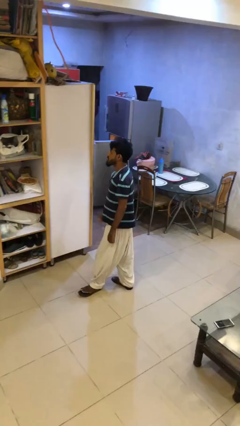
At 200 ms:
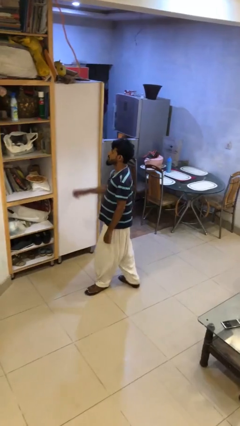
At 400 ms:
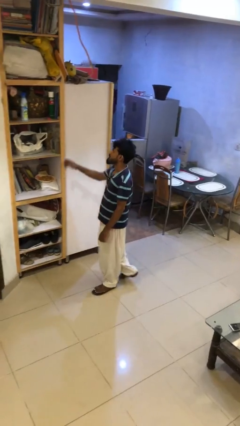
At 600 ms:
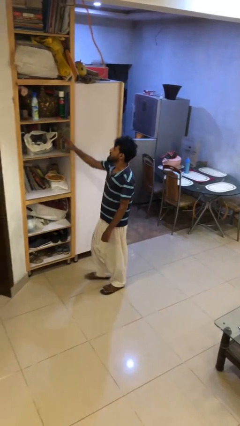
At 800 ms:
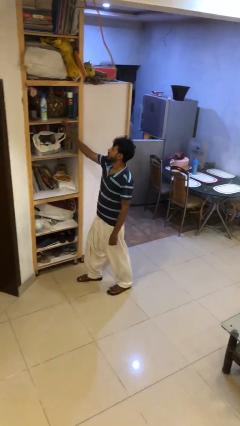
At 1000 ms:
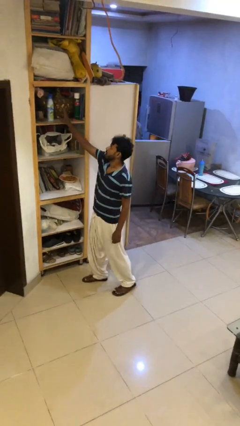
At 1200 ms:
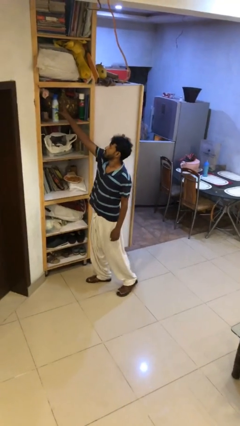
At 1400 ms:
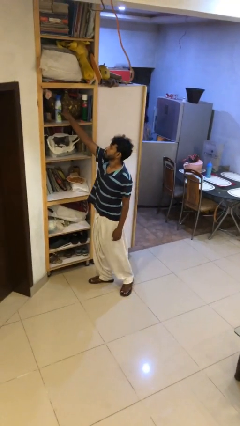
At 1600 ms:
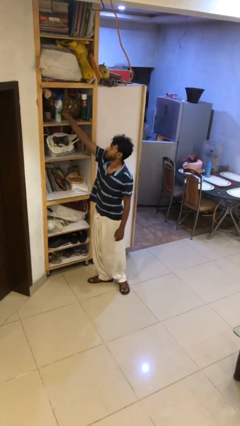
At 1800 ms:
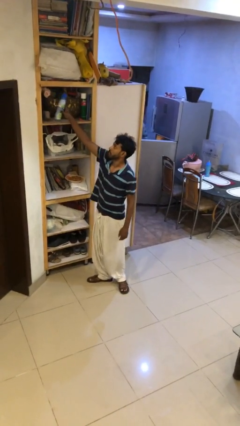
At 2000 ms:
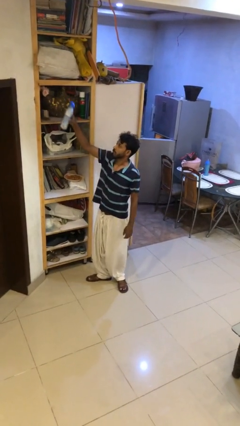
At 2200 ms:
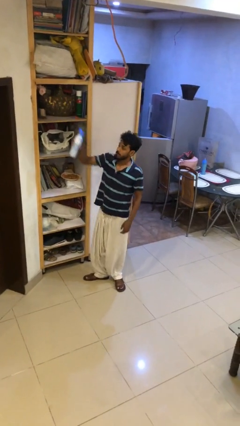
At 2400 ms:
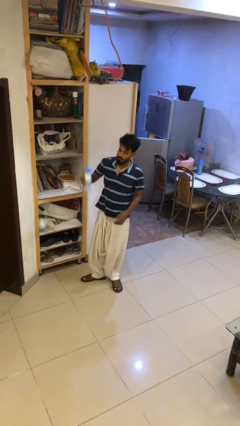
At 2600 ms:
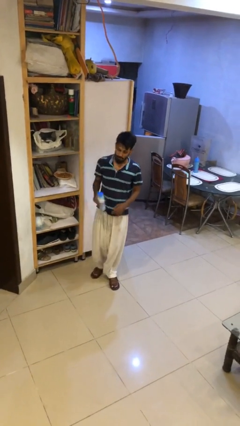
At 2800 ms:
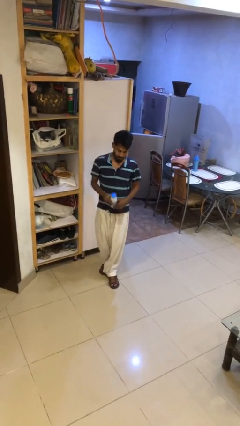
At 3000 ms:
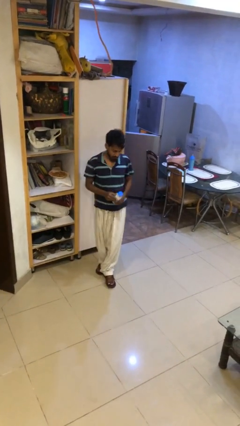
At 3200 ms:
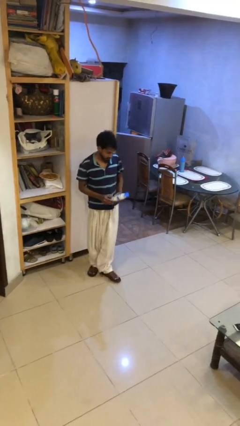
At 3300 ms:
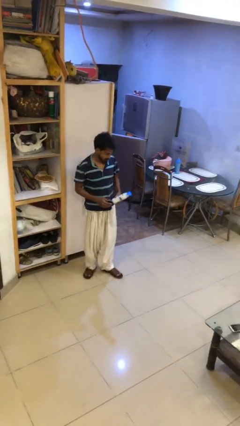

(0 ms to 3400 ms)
person picks up object from shelf

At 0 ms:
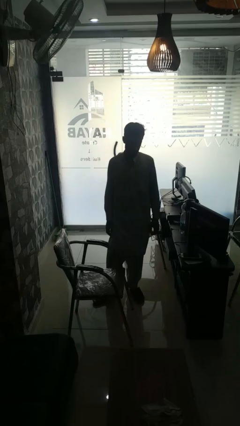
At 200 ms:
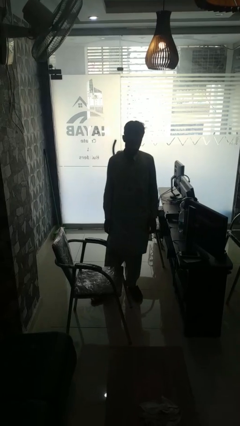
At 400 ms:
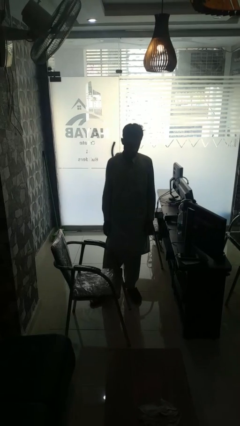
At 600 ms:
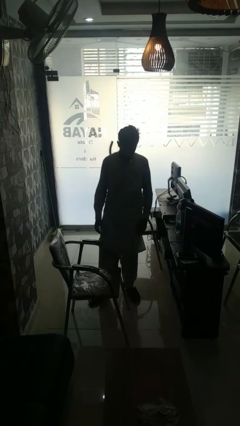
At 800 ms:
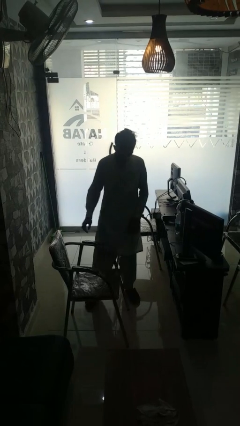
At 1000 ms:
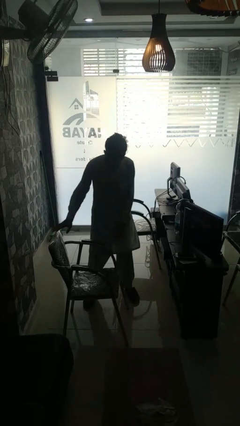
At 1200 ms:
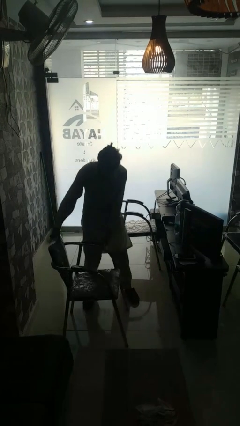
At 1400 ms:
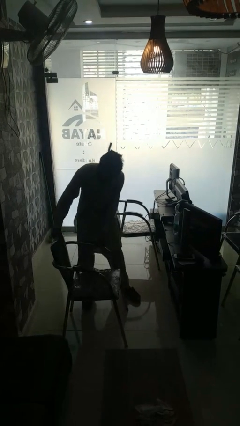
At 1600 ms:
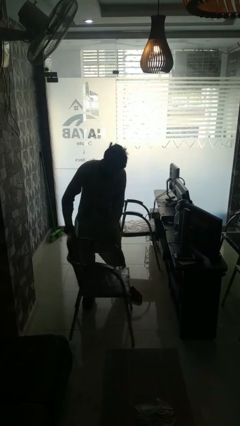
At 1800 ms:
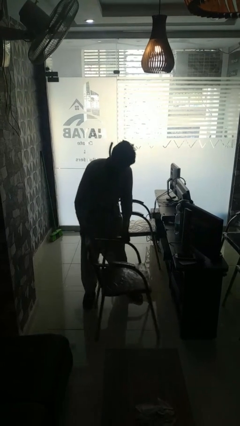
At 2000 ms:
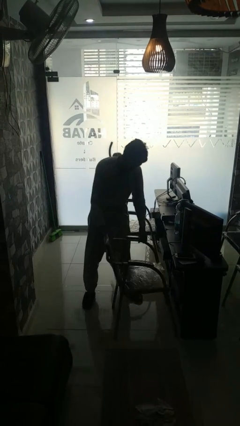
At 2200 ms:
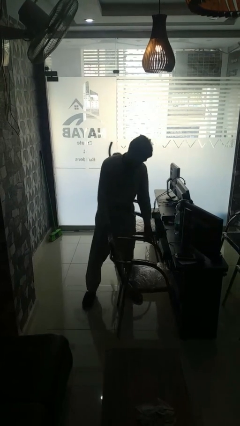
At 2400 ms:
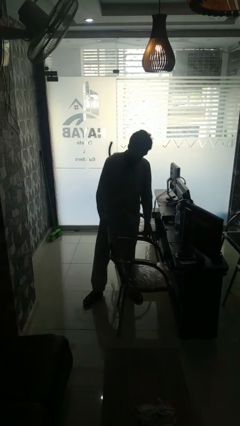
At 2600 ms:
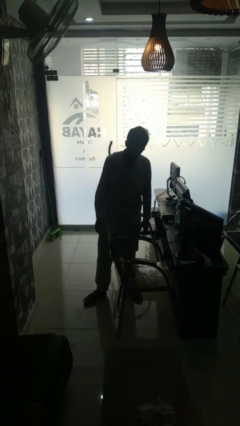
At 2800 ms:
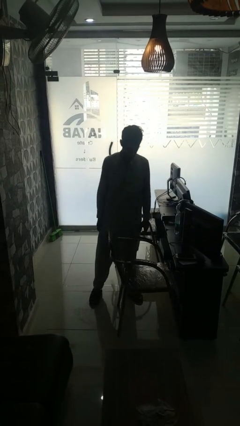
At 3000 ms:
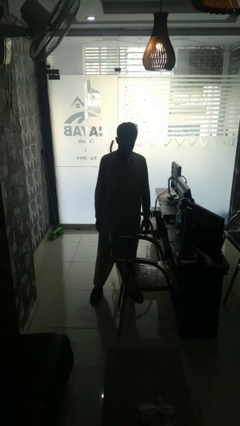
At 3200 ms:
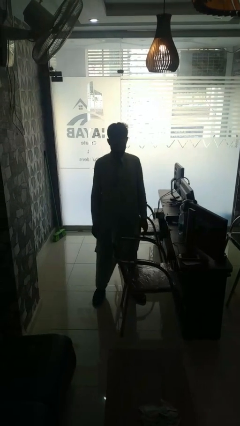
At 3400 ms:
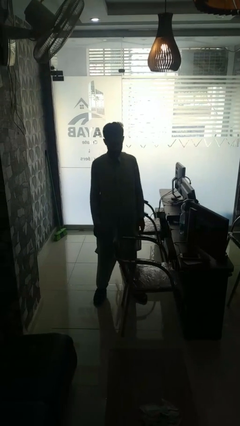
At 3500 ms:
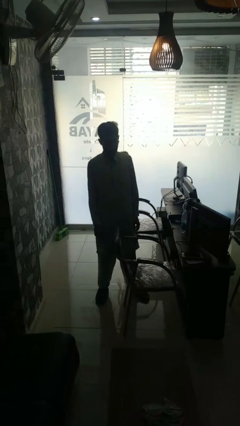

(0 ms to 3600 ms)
person pushes in chair

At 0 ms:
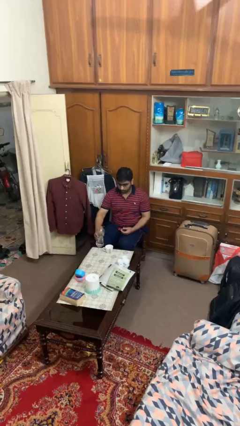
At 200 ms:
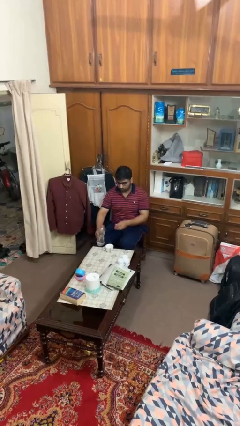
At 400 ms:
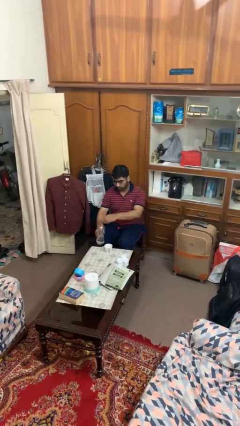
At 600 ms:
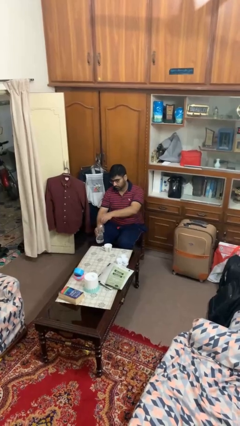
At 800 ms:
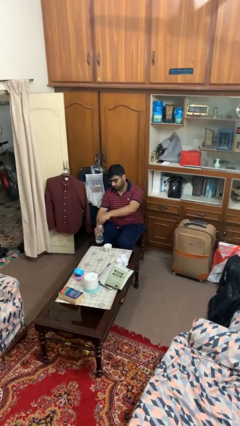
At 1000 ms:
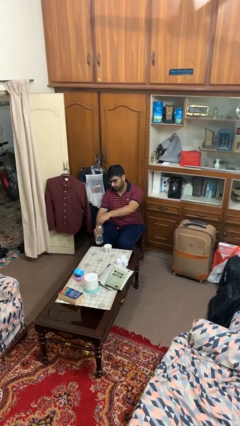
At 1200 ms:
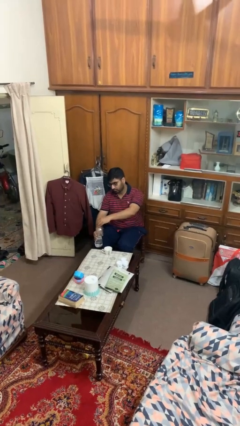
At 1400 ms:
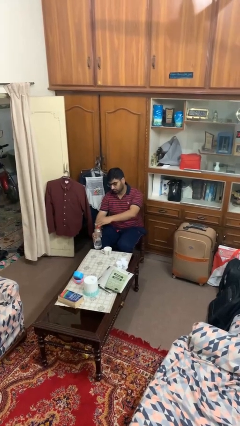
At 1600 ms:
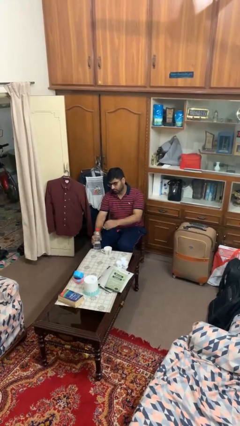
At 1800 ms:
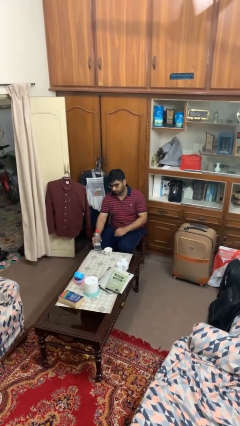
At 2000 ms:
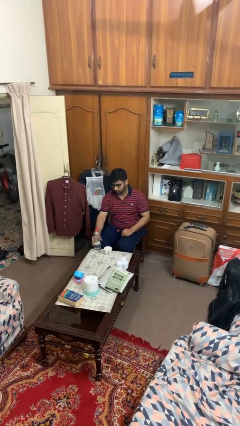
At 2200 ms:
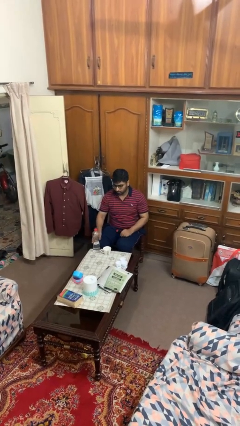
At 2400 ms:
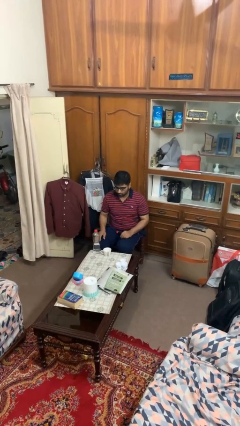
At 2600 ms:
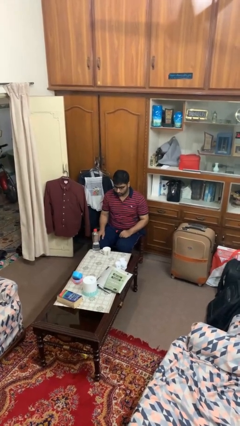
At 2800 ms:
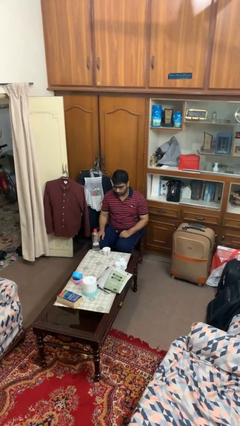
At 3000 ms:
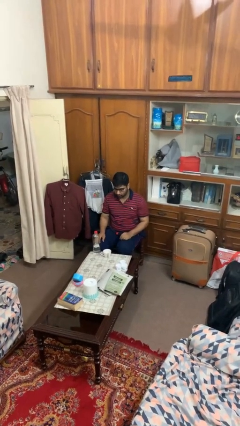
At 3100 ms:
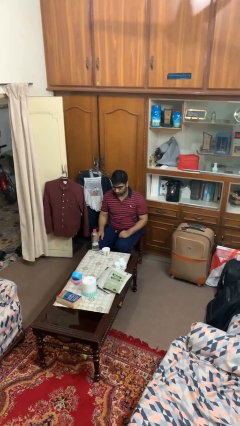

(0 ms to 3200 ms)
person screws lid to bottle

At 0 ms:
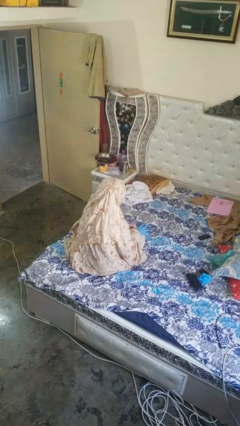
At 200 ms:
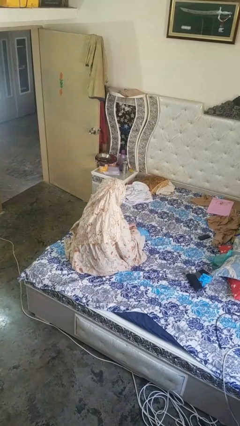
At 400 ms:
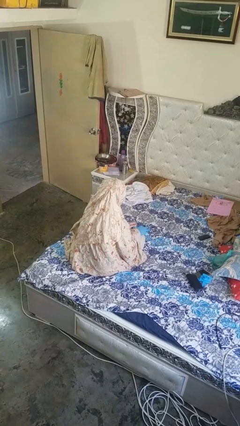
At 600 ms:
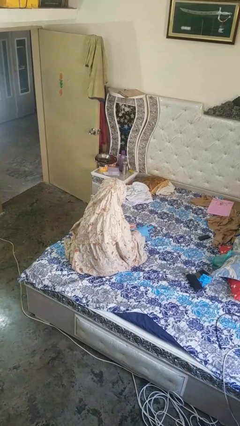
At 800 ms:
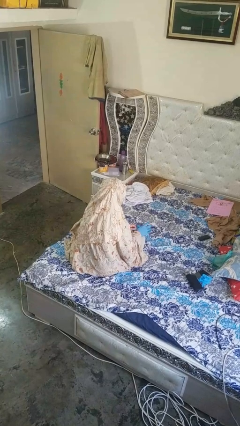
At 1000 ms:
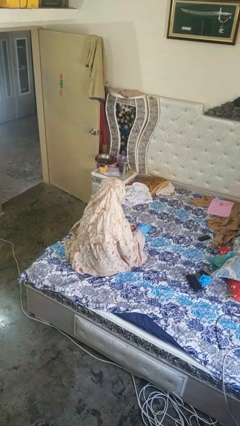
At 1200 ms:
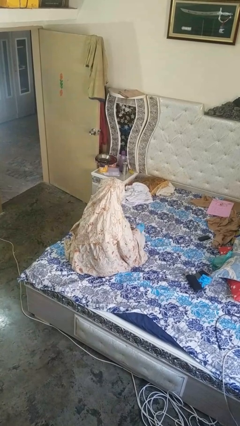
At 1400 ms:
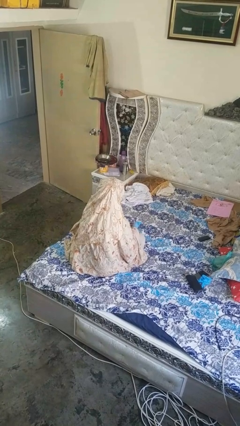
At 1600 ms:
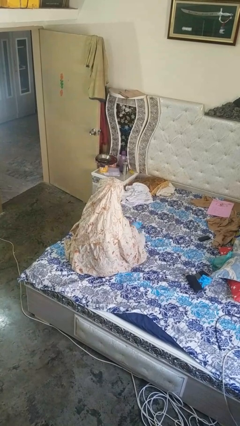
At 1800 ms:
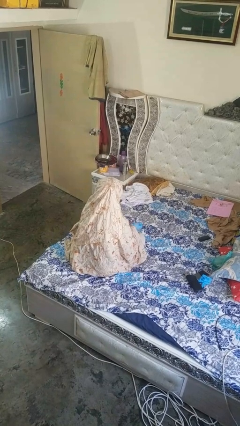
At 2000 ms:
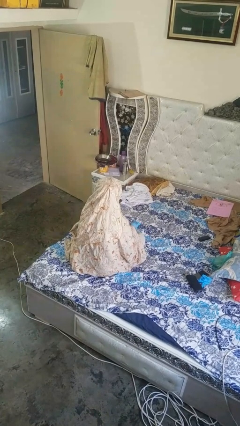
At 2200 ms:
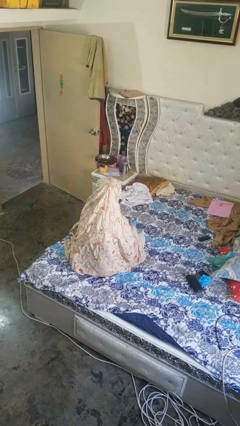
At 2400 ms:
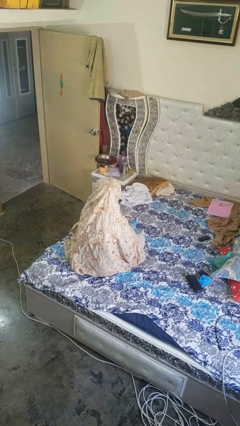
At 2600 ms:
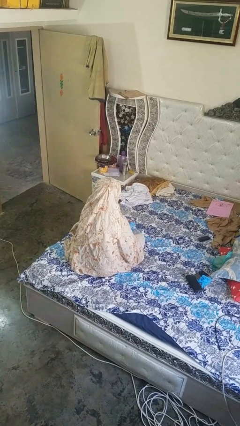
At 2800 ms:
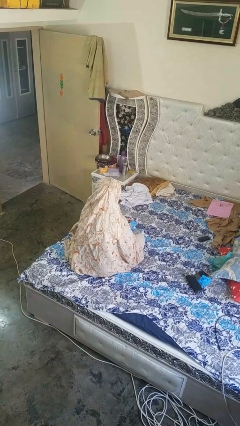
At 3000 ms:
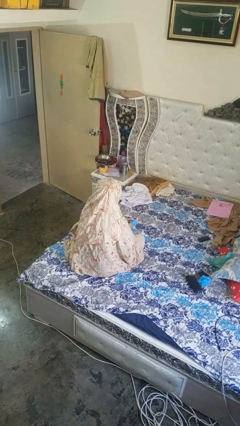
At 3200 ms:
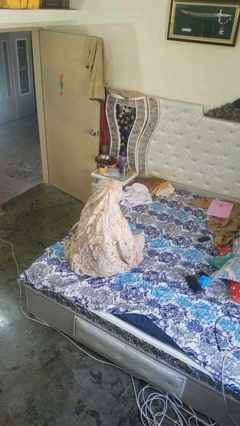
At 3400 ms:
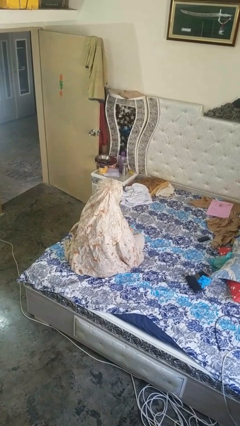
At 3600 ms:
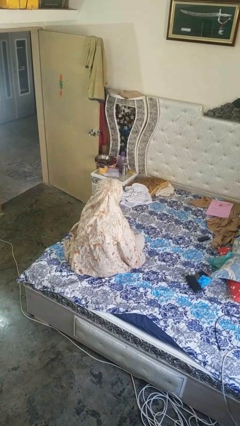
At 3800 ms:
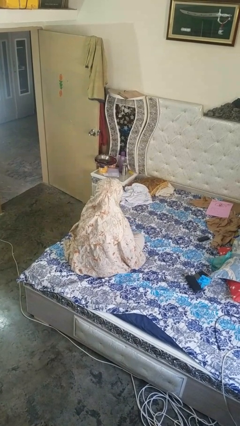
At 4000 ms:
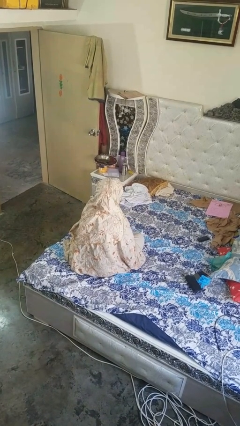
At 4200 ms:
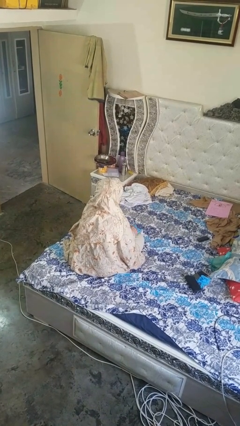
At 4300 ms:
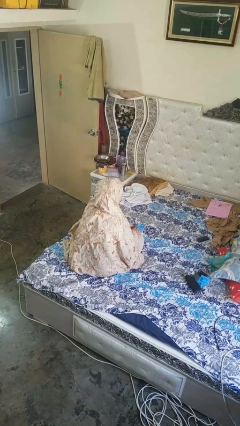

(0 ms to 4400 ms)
person takes off gloves

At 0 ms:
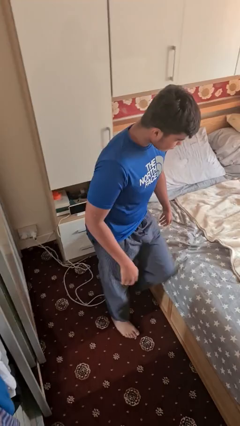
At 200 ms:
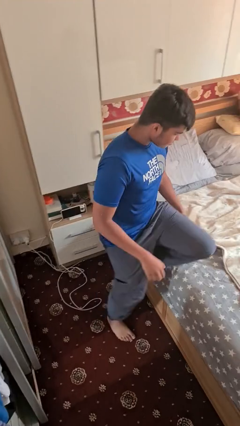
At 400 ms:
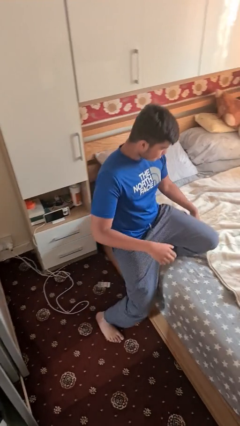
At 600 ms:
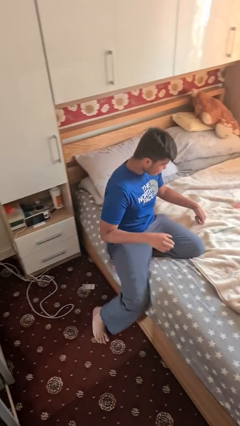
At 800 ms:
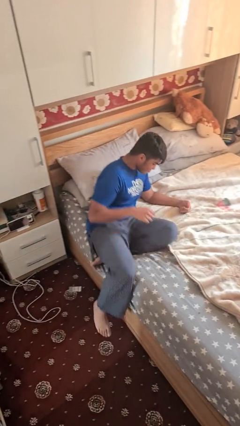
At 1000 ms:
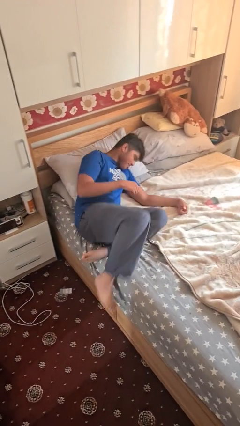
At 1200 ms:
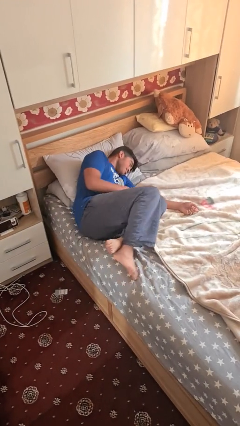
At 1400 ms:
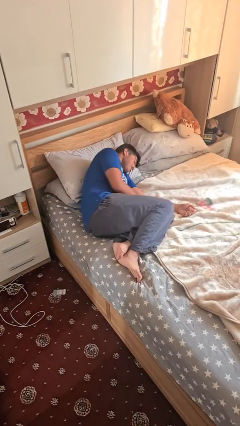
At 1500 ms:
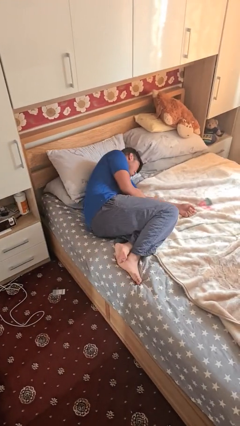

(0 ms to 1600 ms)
person lies down on bed

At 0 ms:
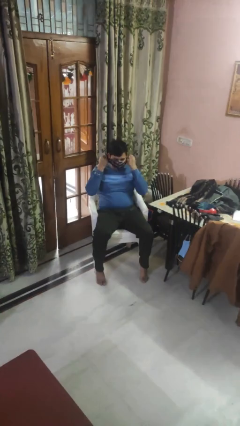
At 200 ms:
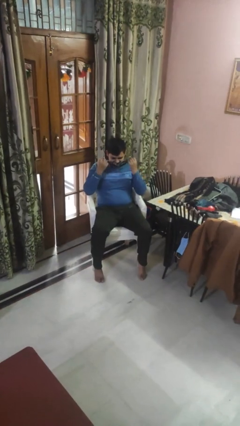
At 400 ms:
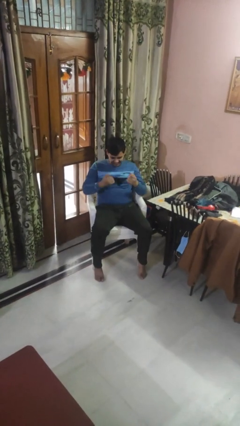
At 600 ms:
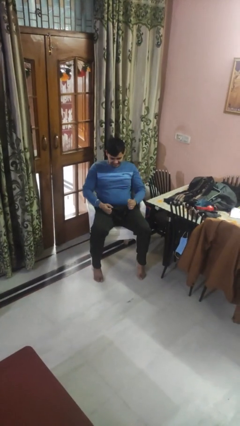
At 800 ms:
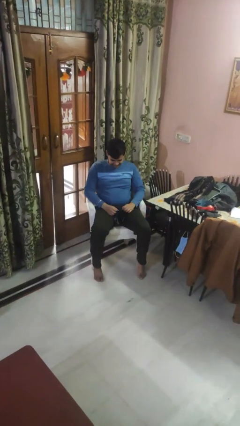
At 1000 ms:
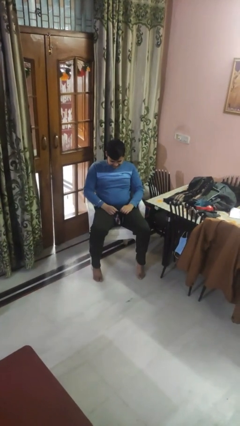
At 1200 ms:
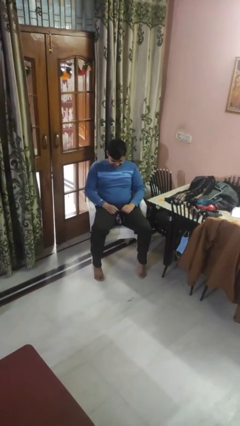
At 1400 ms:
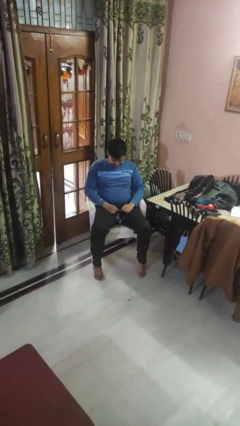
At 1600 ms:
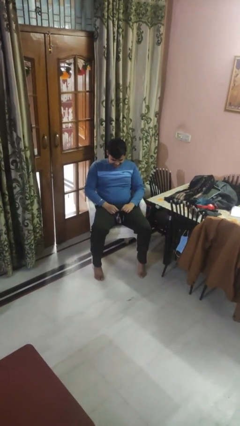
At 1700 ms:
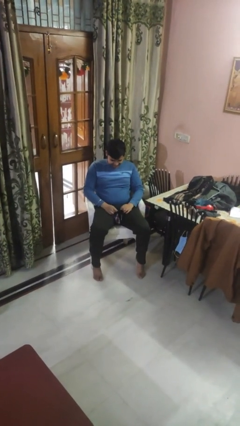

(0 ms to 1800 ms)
person takes off facemask
